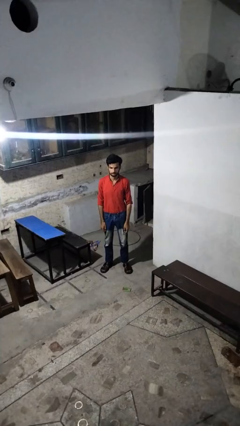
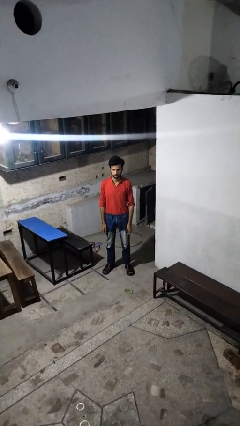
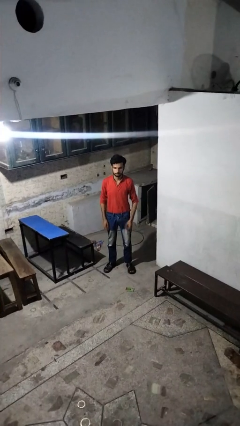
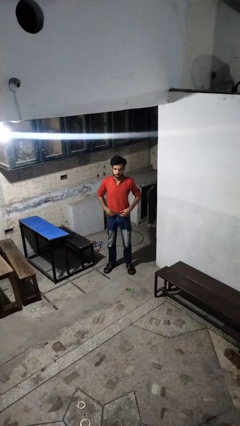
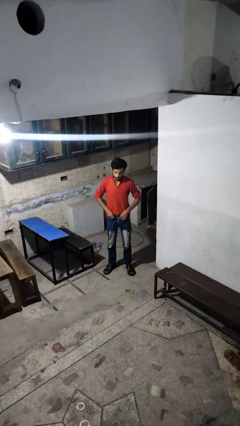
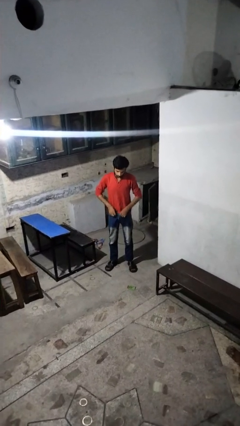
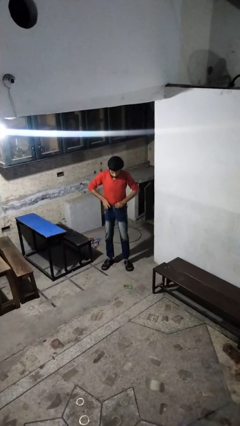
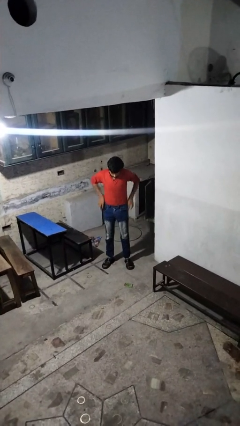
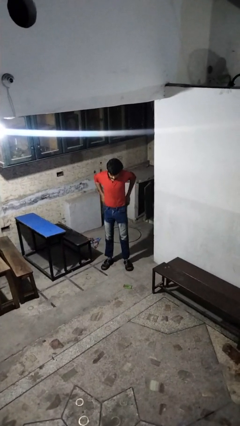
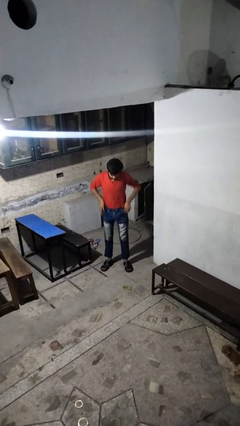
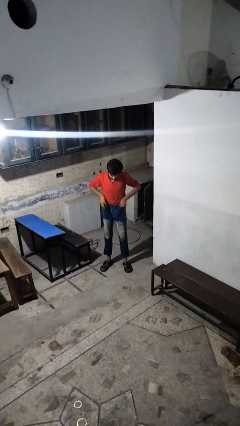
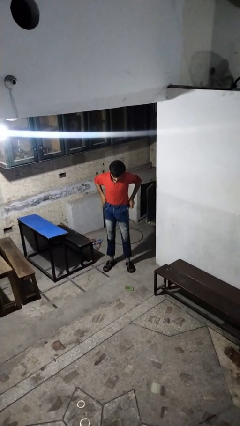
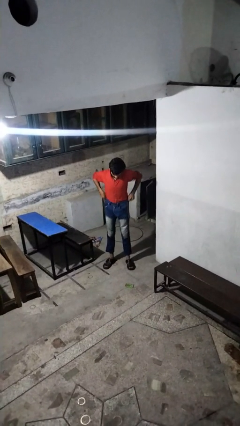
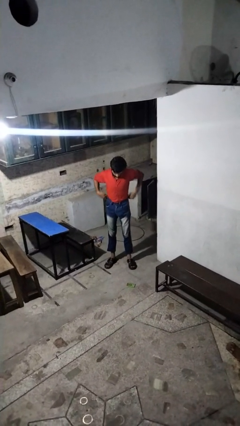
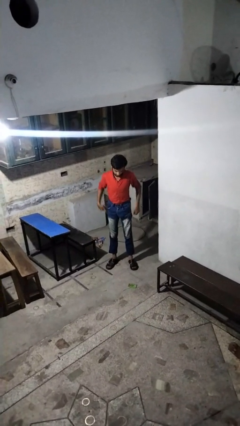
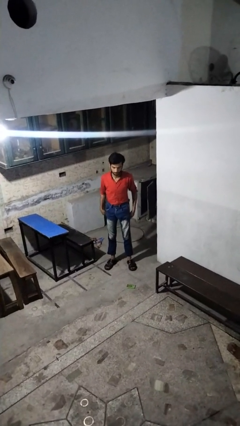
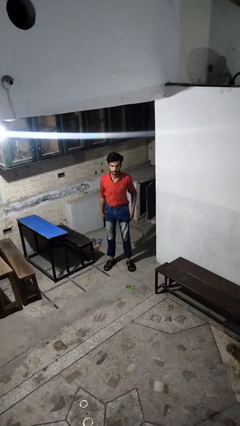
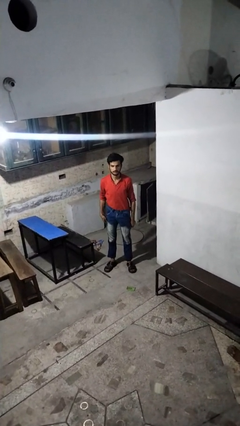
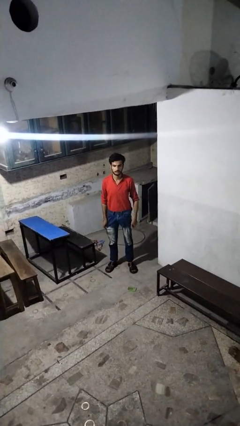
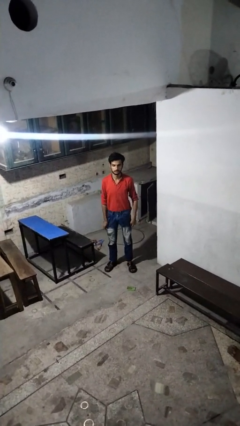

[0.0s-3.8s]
person hikes up pants

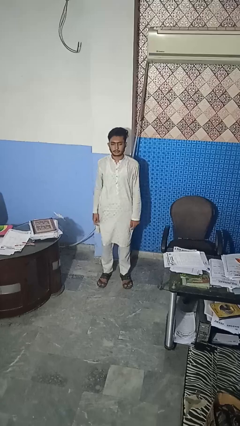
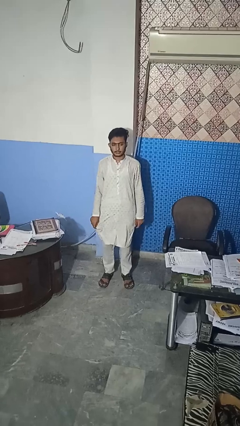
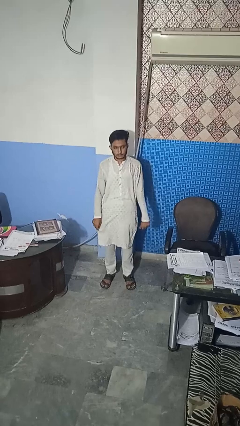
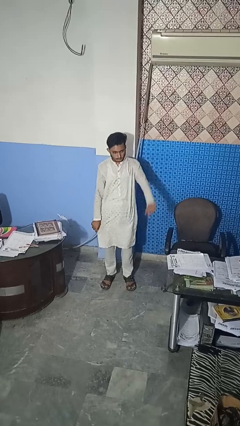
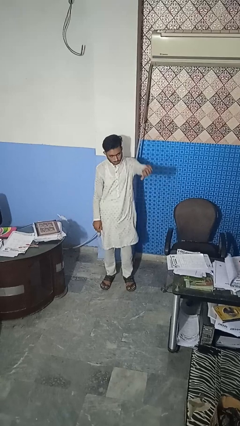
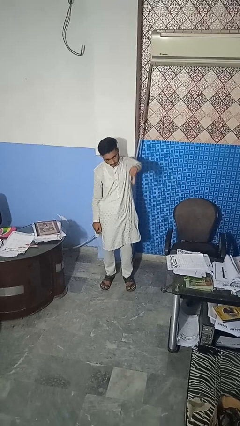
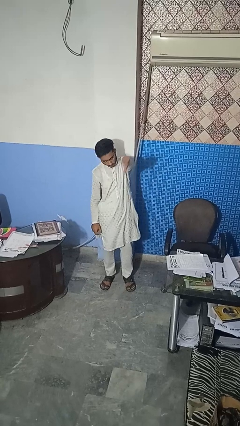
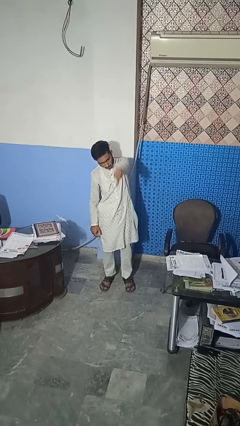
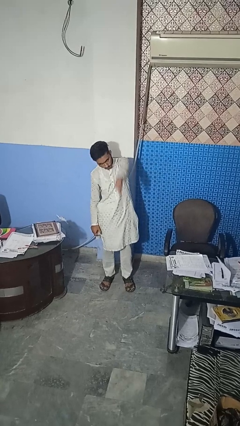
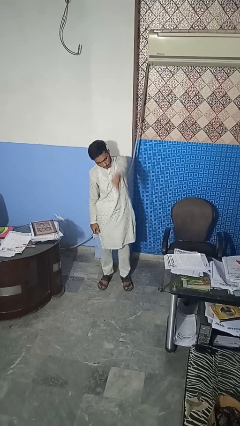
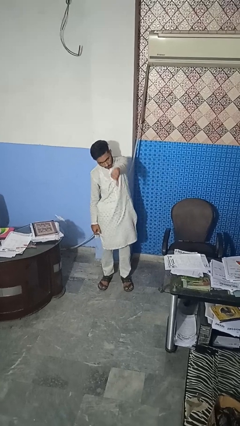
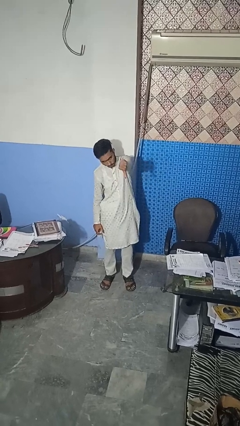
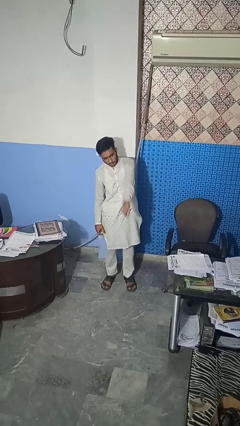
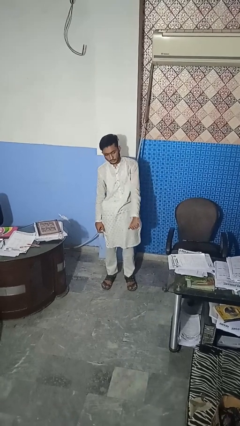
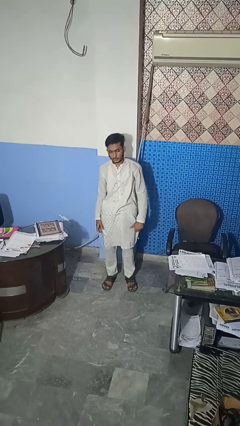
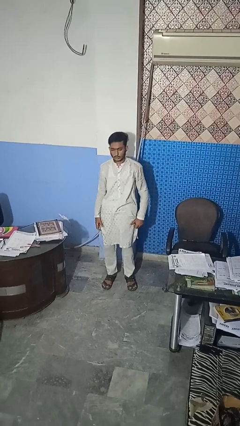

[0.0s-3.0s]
person gestures thumbs down

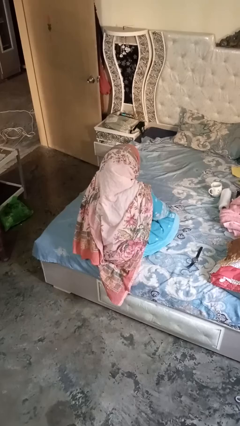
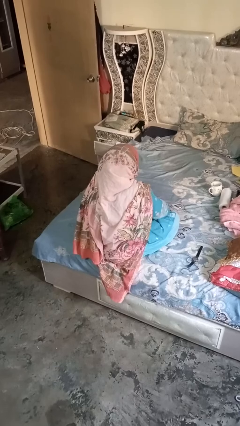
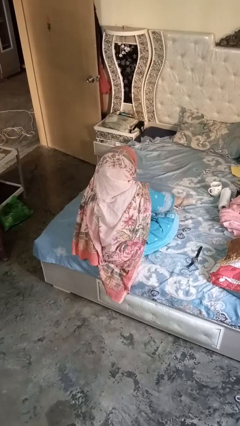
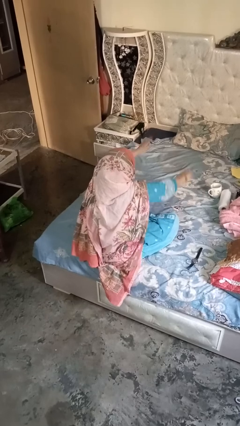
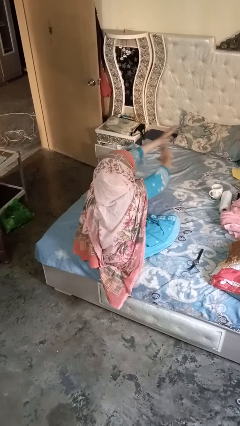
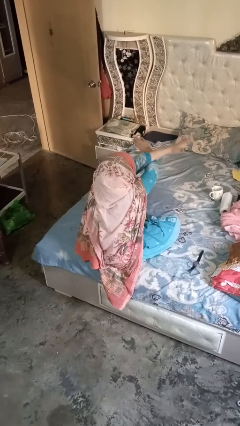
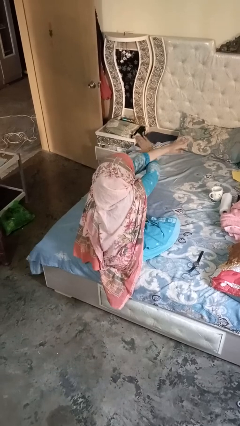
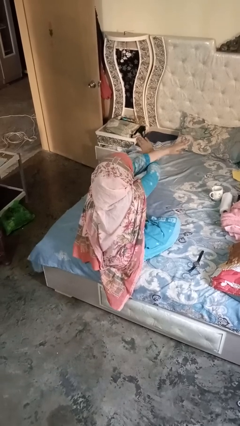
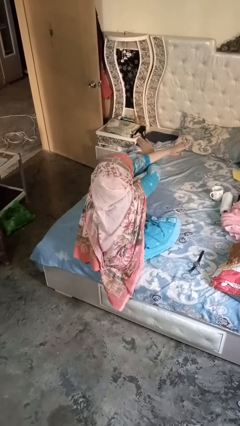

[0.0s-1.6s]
person gestures arms x

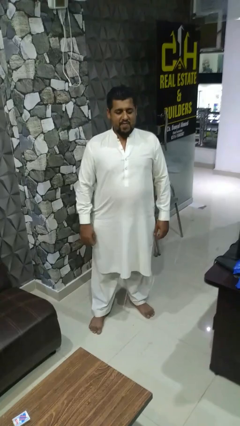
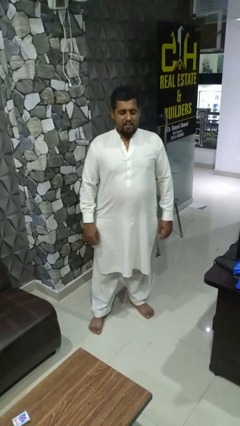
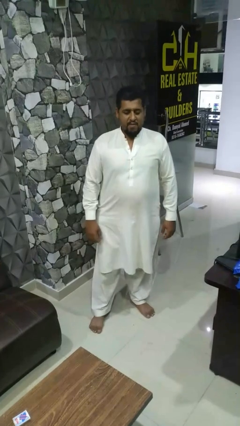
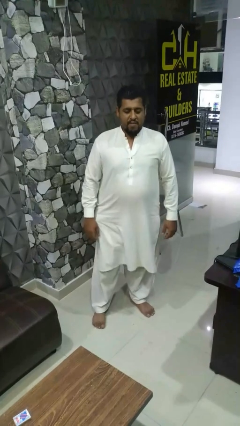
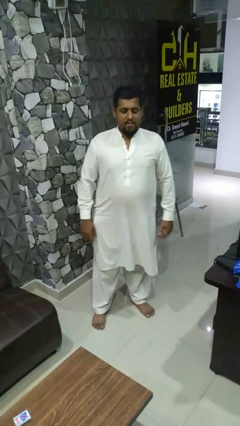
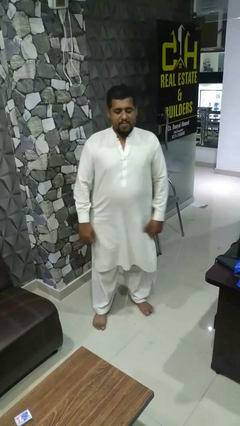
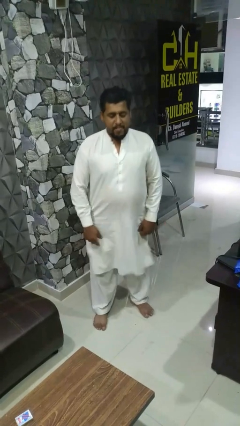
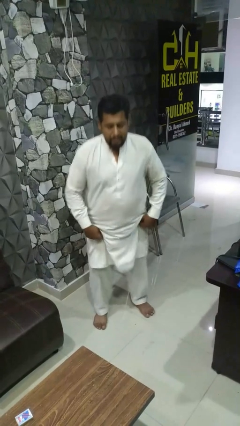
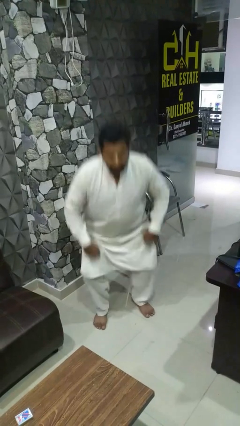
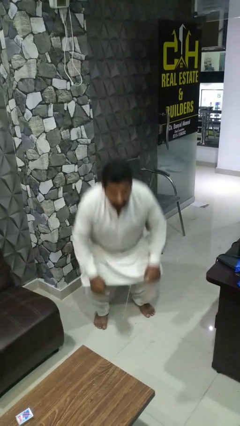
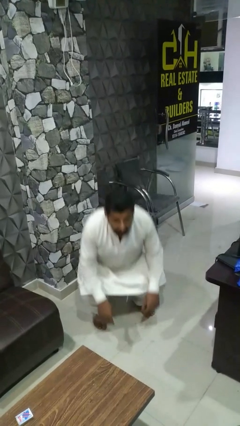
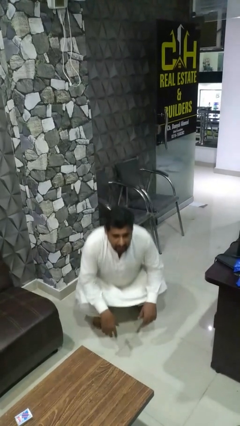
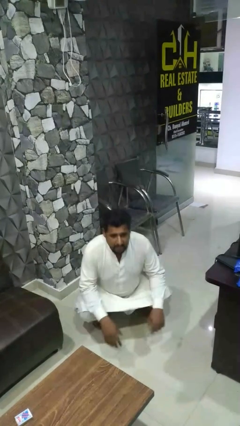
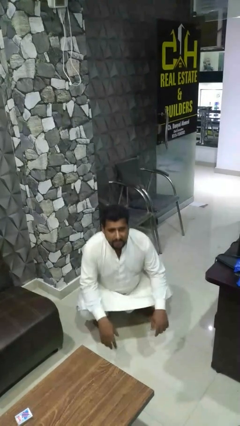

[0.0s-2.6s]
person squats

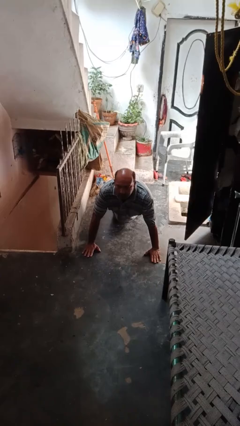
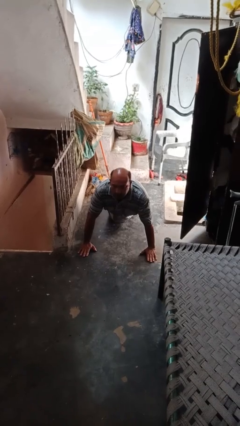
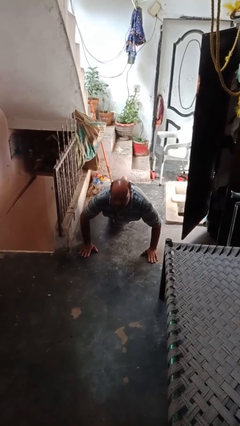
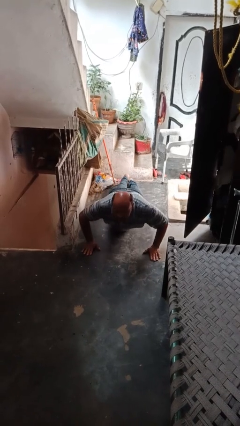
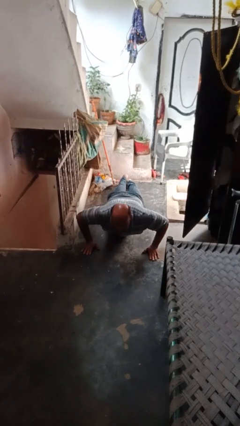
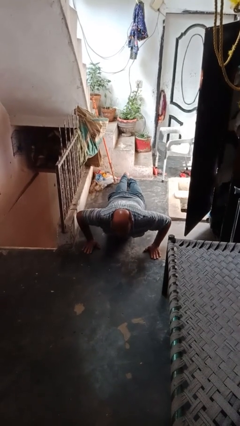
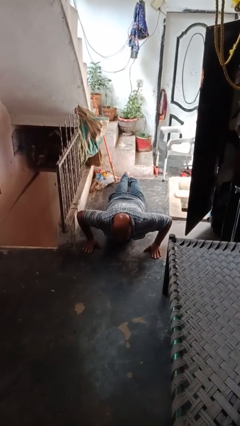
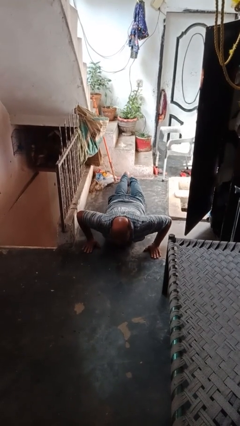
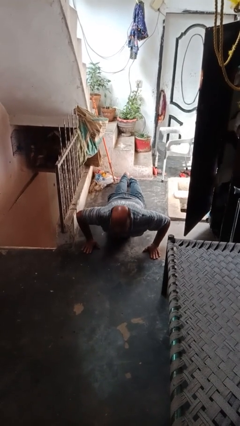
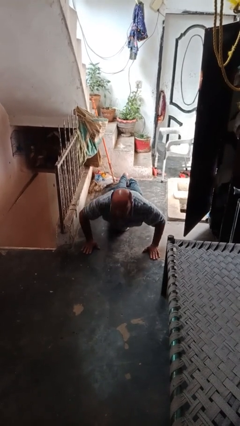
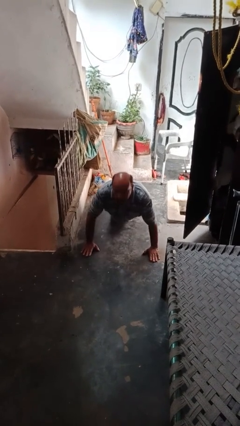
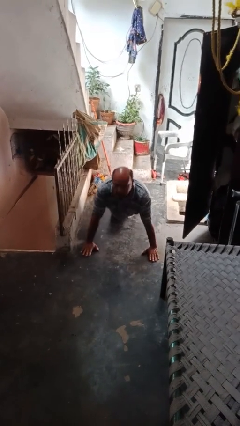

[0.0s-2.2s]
person exercises with pushup

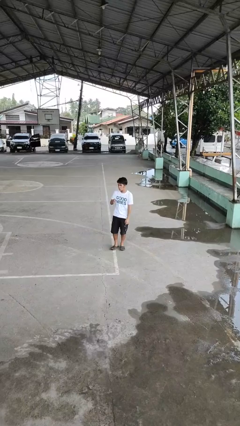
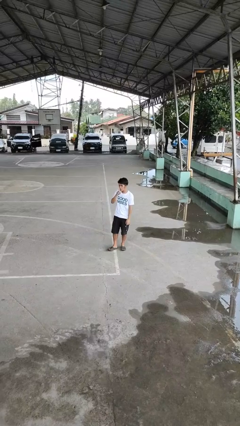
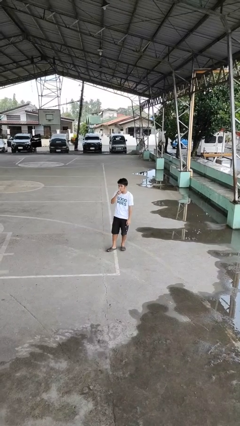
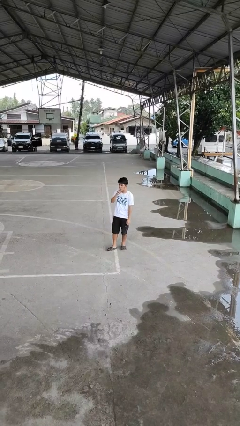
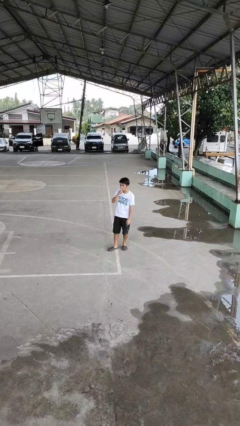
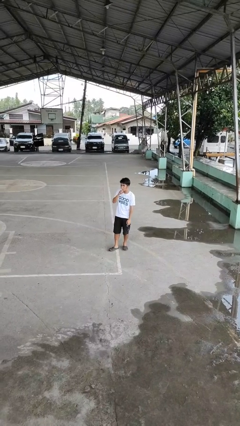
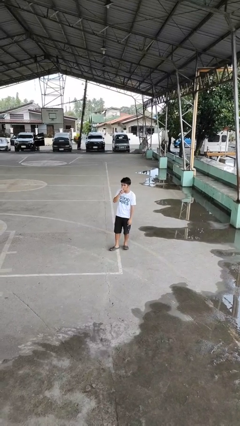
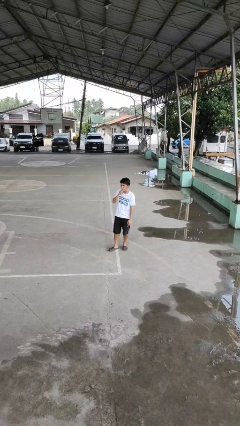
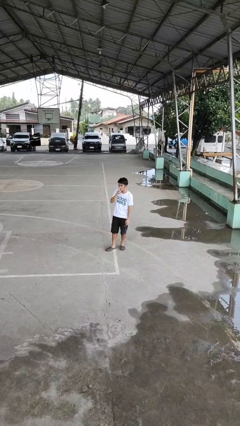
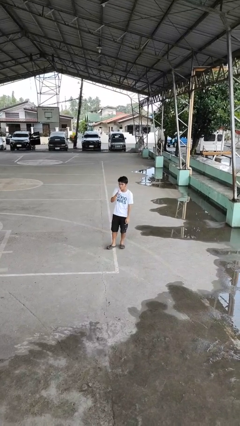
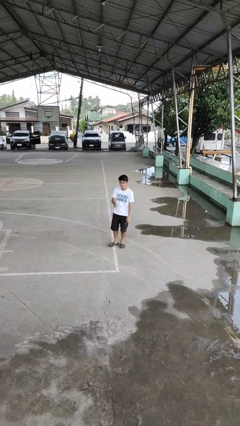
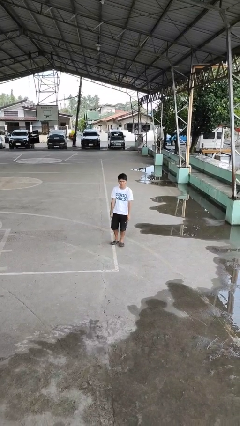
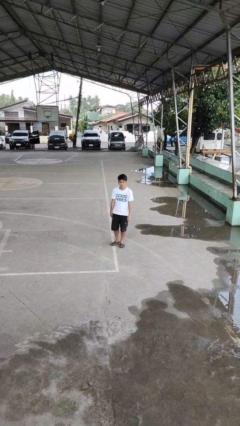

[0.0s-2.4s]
person gestures be quiet

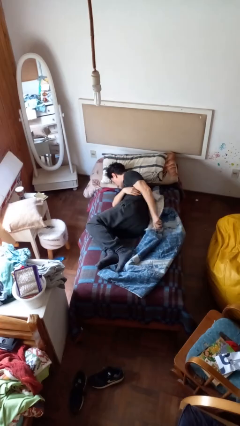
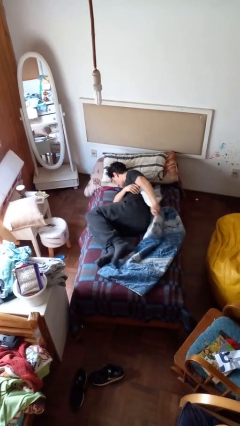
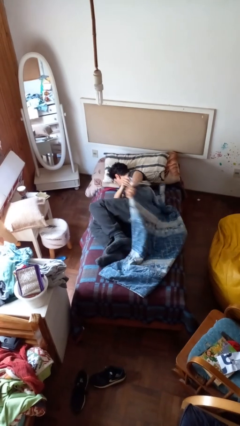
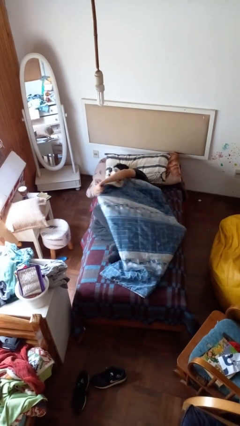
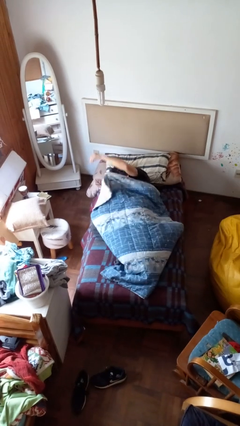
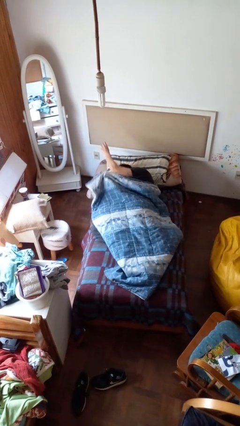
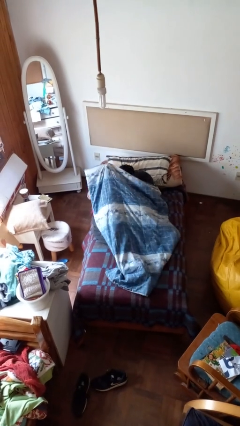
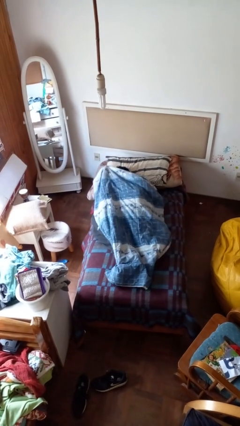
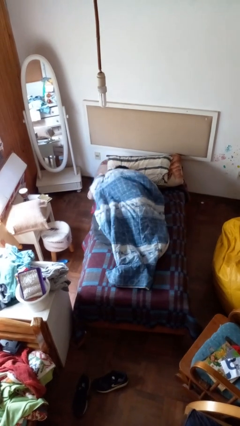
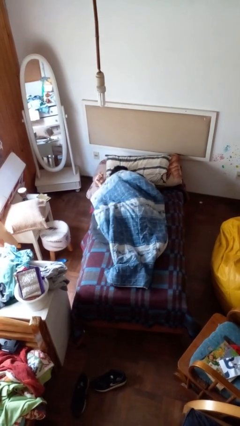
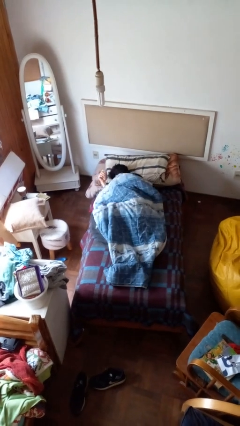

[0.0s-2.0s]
person covers with bedsheets
